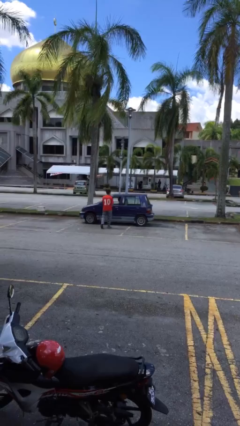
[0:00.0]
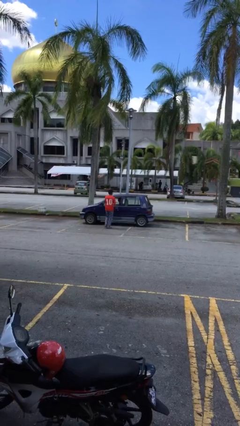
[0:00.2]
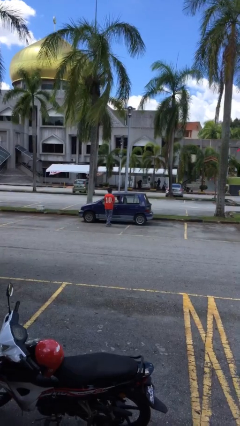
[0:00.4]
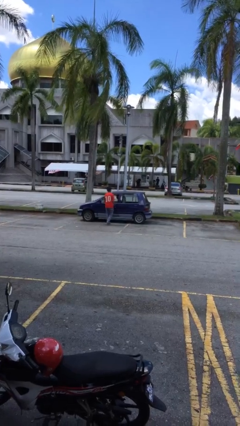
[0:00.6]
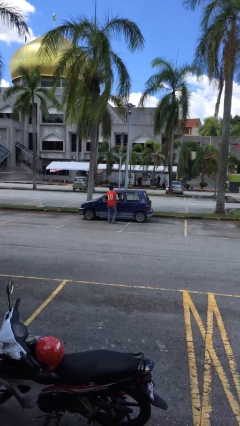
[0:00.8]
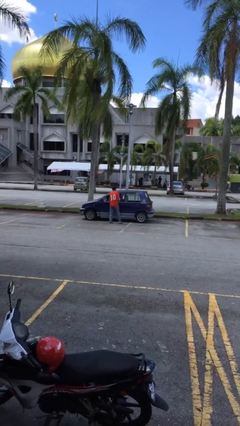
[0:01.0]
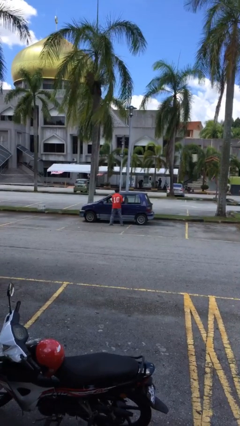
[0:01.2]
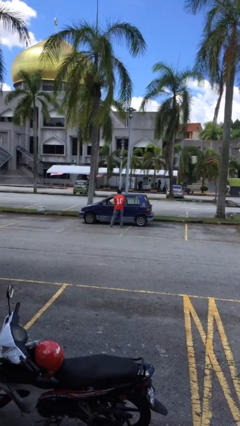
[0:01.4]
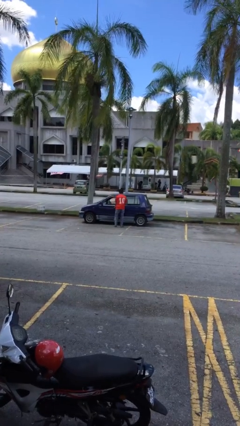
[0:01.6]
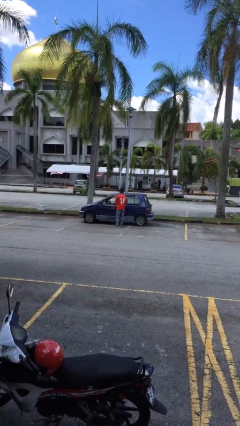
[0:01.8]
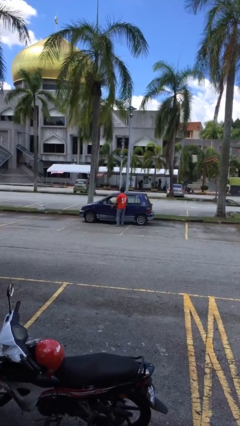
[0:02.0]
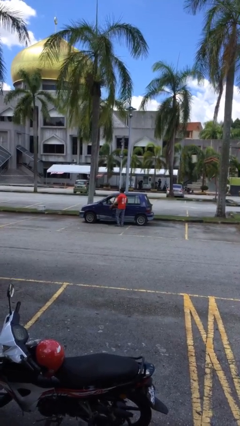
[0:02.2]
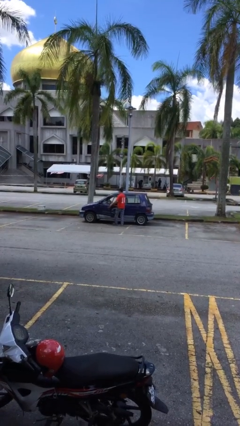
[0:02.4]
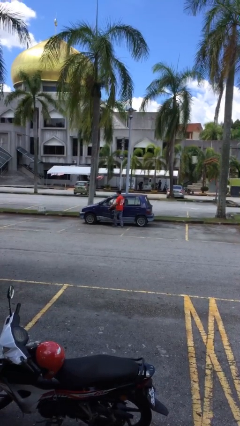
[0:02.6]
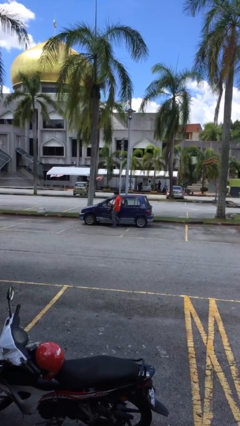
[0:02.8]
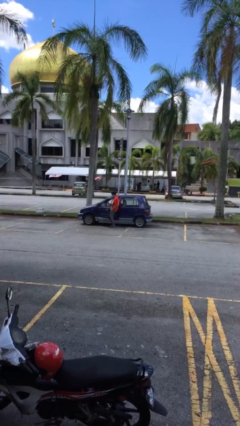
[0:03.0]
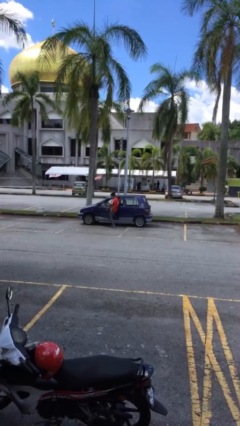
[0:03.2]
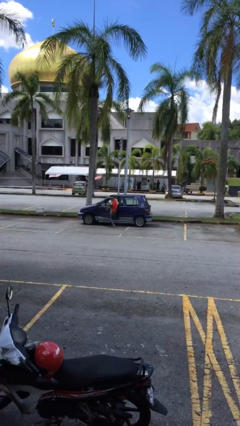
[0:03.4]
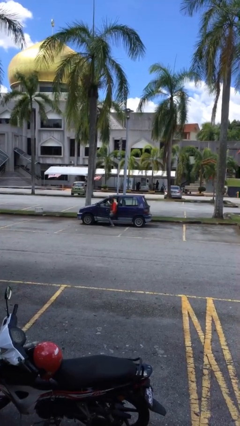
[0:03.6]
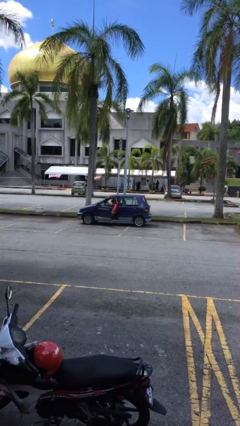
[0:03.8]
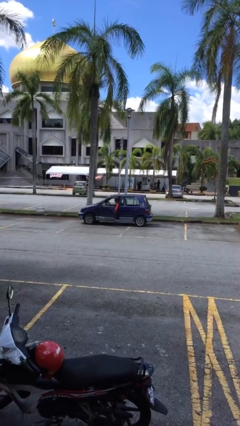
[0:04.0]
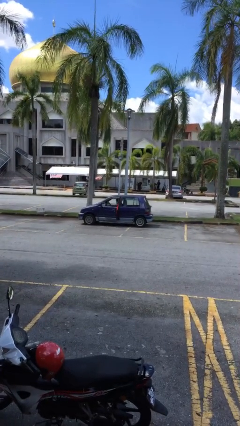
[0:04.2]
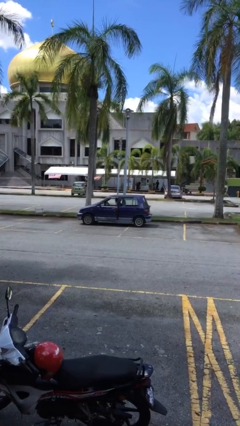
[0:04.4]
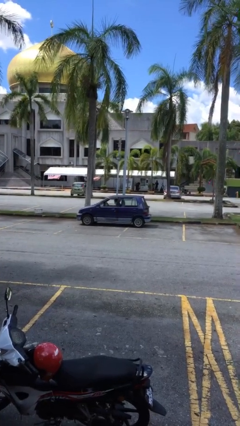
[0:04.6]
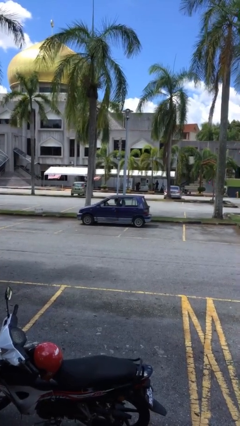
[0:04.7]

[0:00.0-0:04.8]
car picks up person

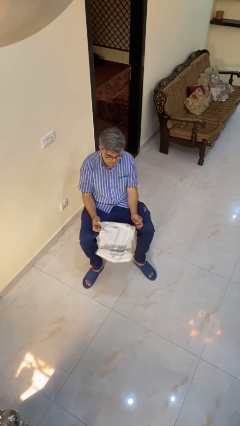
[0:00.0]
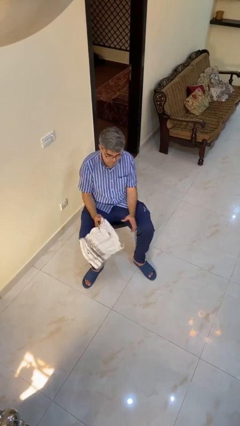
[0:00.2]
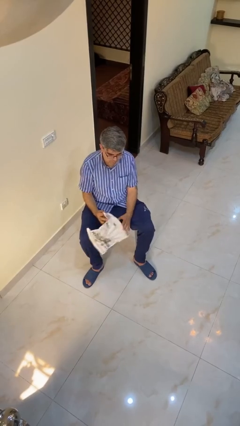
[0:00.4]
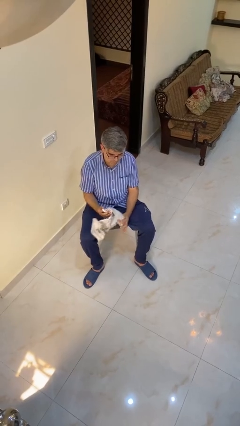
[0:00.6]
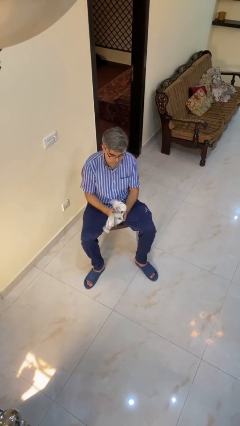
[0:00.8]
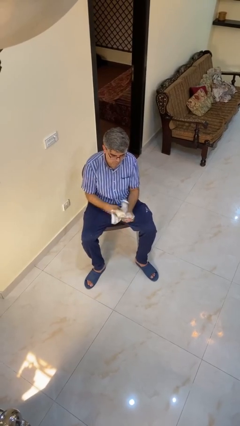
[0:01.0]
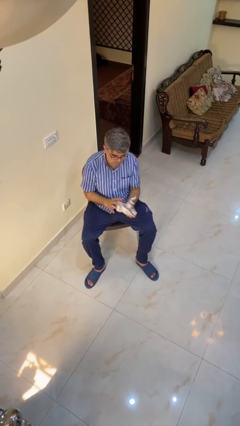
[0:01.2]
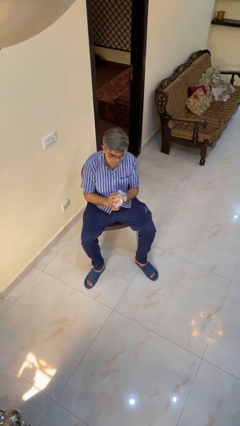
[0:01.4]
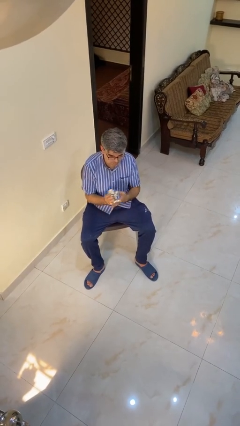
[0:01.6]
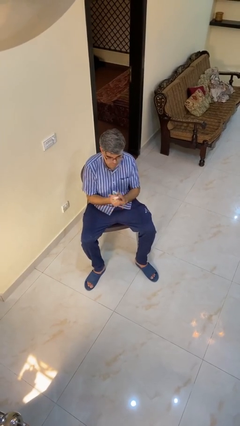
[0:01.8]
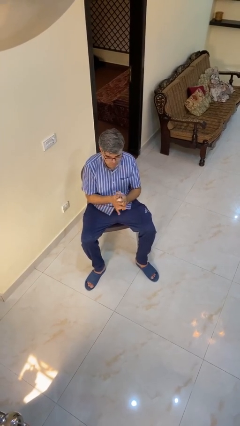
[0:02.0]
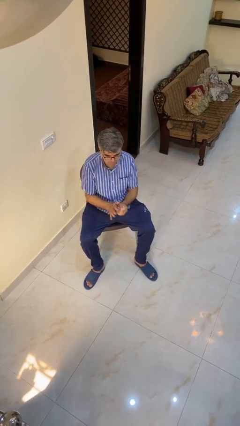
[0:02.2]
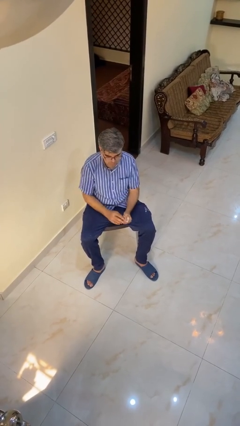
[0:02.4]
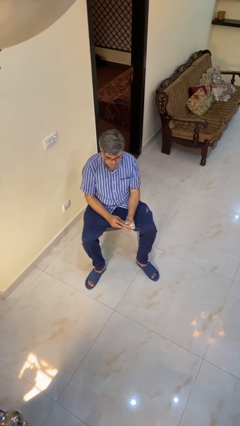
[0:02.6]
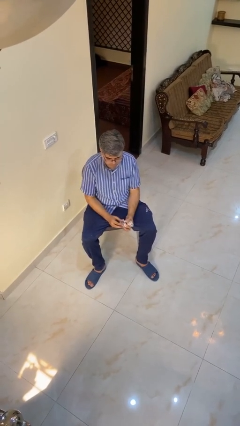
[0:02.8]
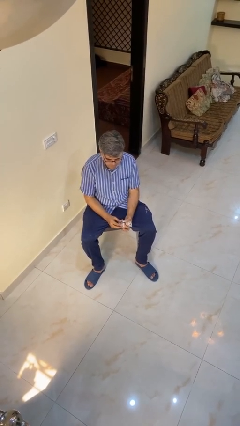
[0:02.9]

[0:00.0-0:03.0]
person crumples paper

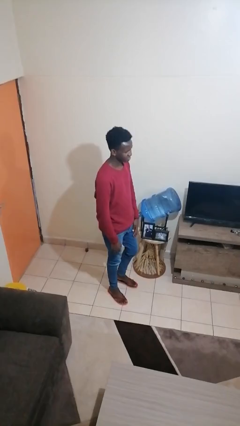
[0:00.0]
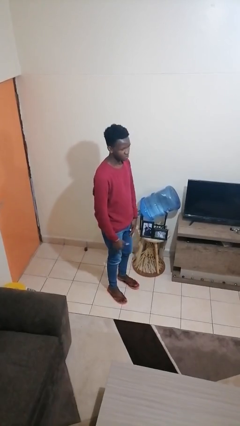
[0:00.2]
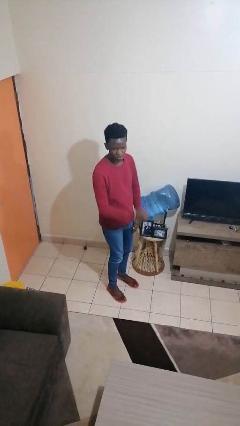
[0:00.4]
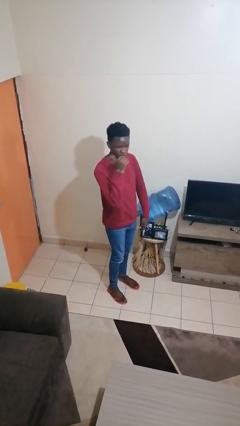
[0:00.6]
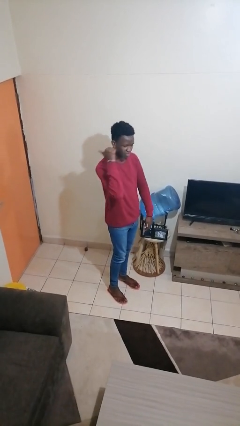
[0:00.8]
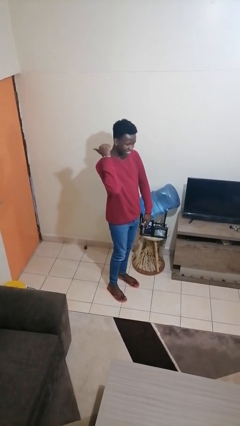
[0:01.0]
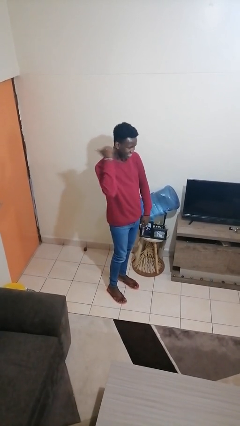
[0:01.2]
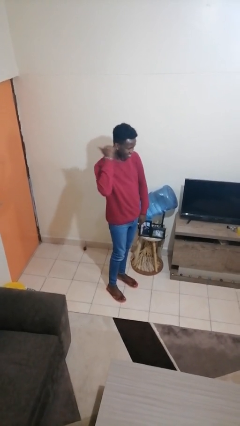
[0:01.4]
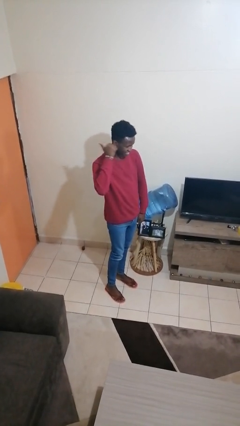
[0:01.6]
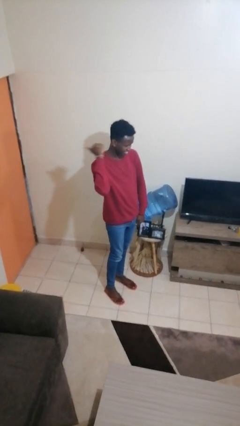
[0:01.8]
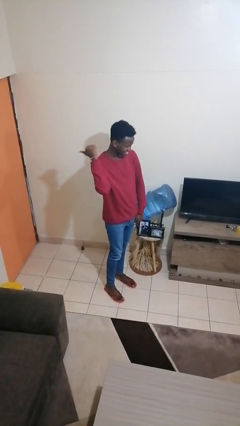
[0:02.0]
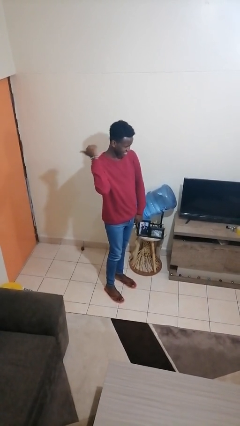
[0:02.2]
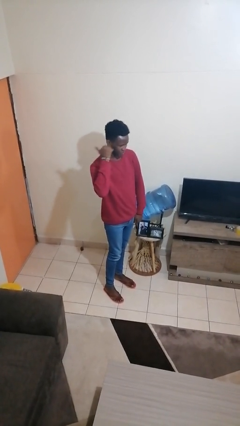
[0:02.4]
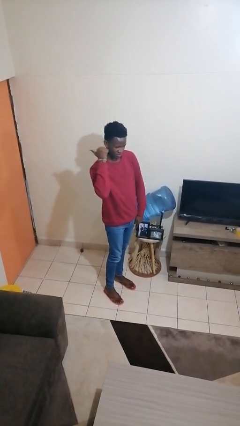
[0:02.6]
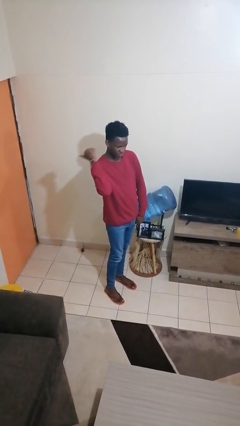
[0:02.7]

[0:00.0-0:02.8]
person gestures behind me

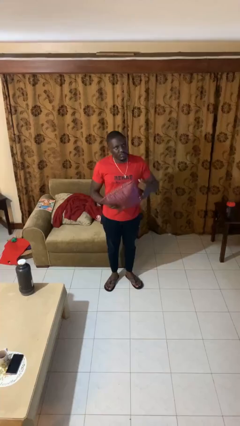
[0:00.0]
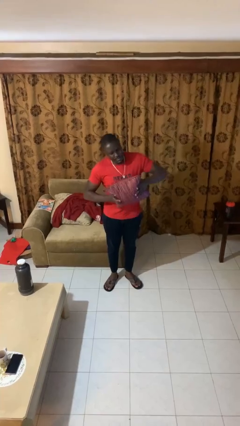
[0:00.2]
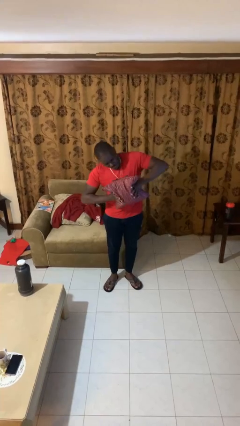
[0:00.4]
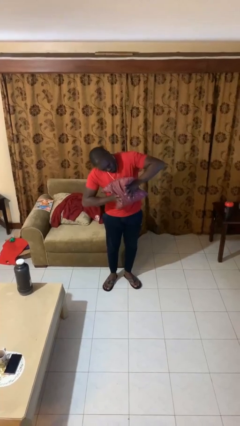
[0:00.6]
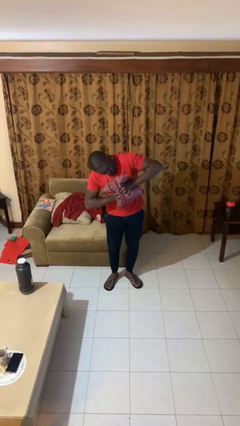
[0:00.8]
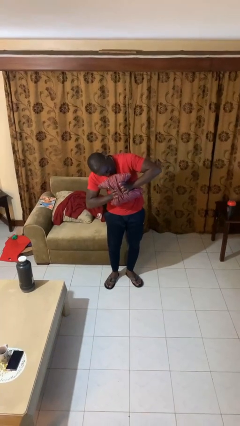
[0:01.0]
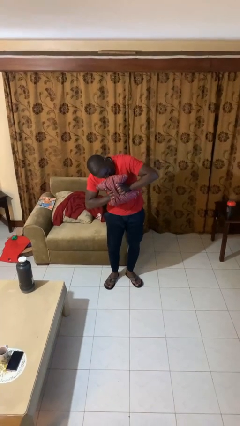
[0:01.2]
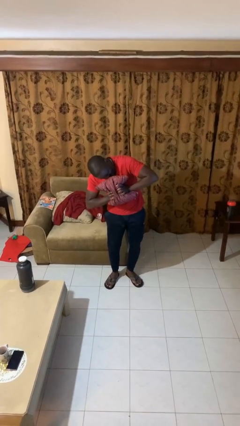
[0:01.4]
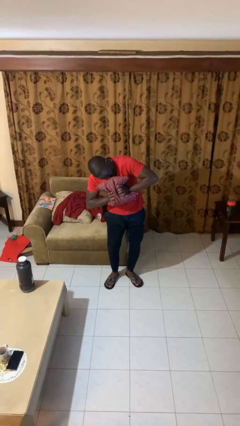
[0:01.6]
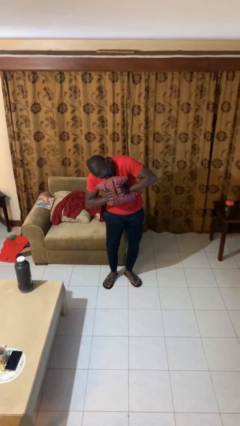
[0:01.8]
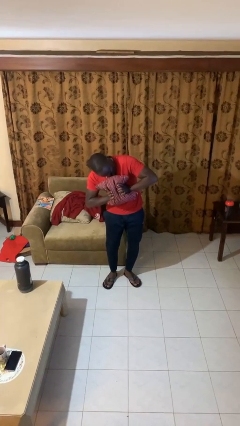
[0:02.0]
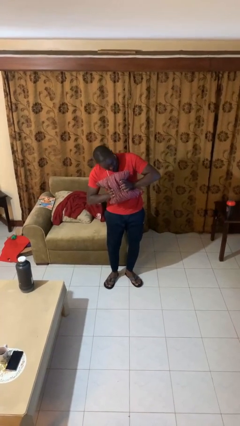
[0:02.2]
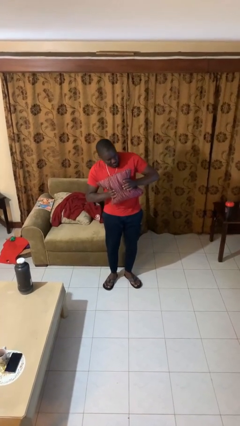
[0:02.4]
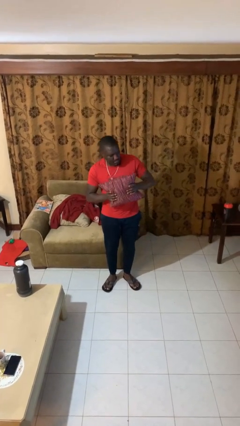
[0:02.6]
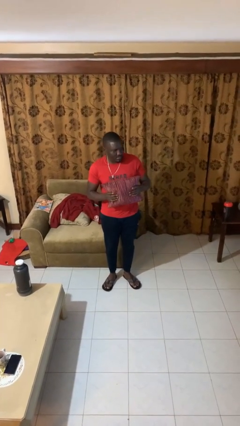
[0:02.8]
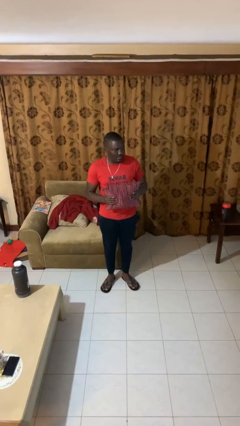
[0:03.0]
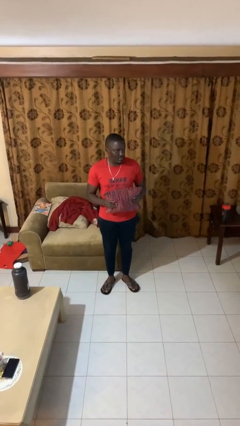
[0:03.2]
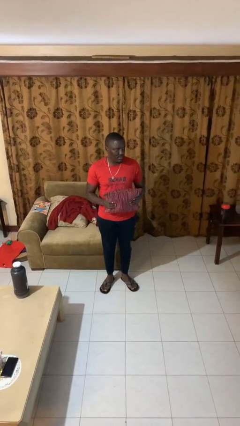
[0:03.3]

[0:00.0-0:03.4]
person squeezes object

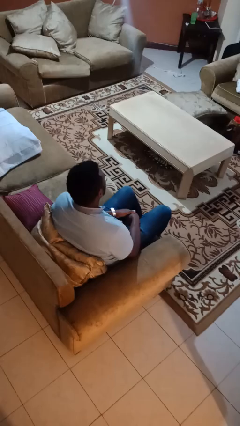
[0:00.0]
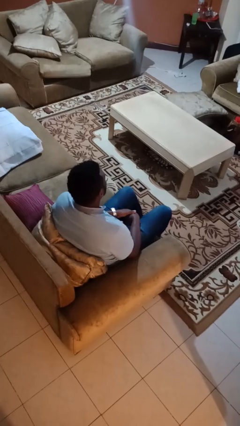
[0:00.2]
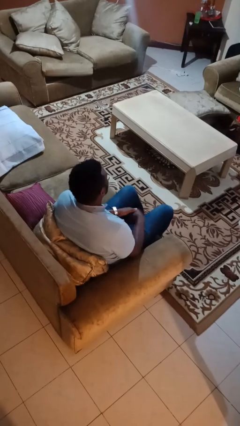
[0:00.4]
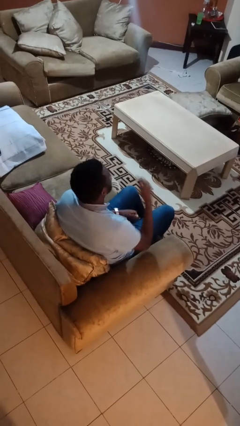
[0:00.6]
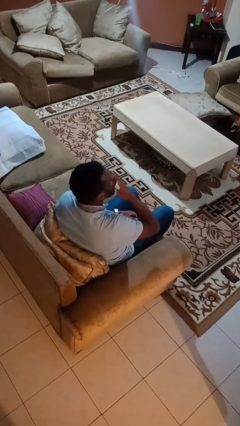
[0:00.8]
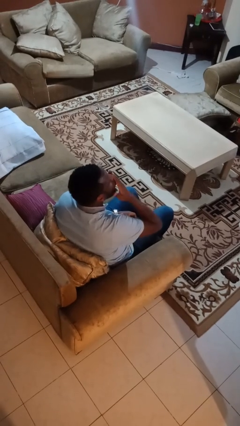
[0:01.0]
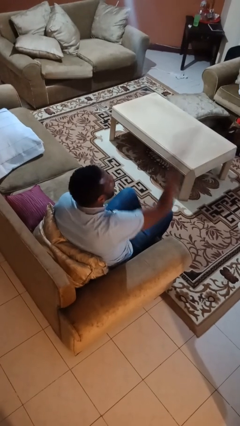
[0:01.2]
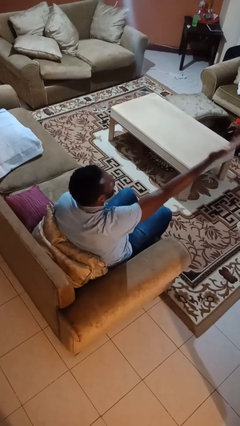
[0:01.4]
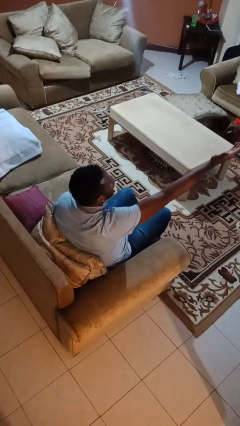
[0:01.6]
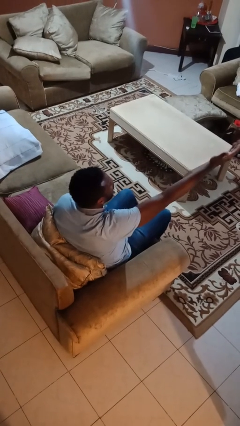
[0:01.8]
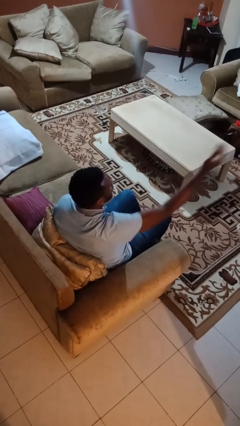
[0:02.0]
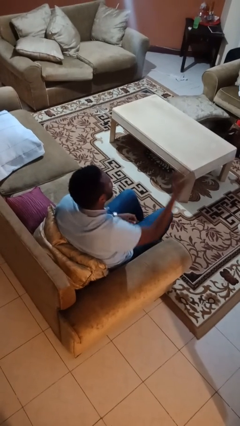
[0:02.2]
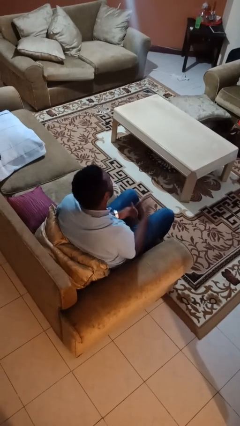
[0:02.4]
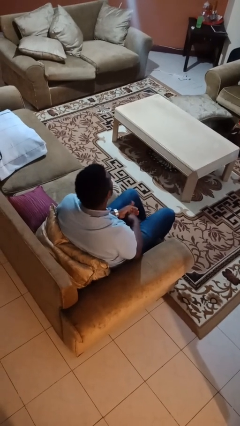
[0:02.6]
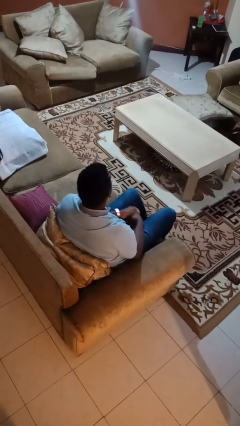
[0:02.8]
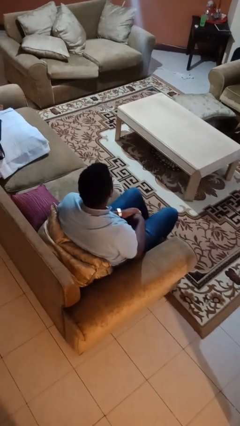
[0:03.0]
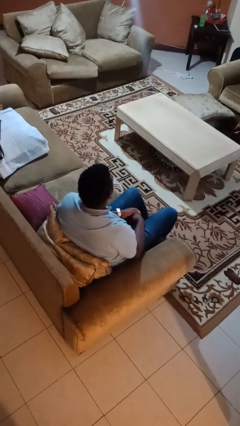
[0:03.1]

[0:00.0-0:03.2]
person gestures blow kiss

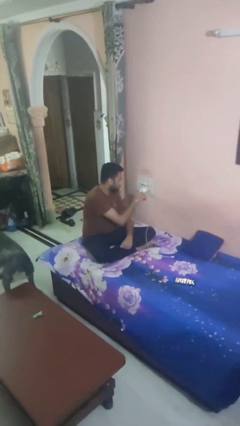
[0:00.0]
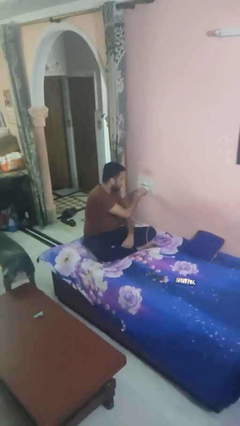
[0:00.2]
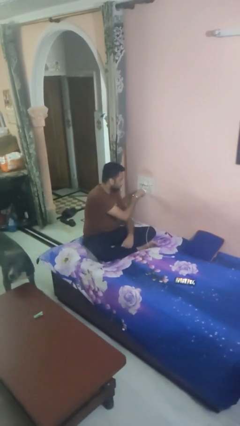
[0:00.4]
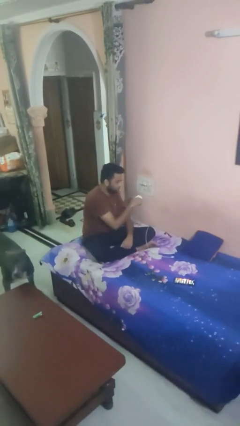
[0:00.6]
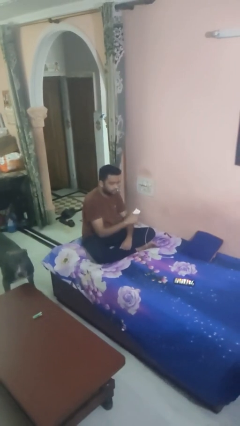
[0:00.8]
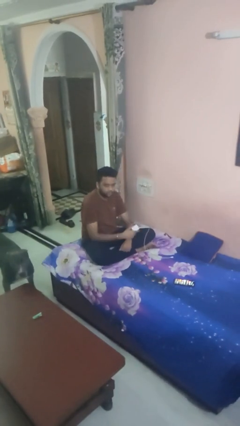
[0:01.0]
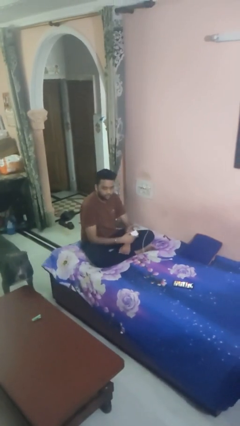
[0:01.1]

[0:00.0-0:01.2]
person unplugs from electrical socket
